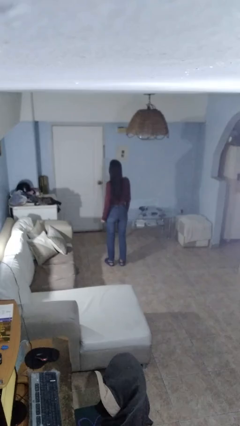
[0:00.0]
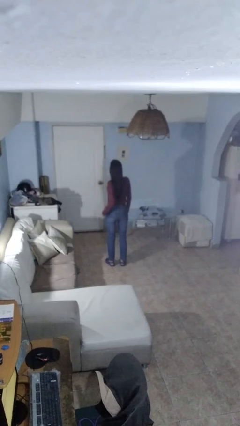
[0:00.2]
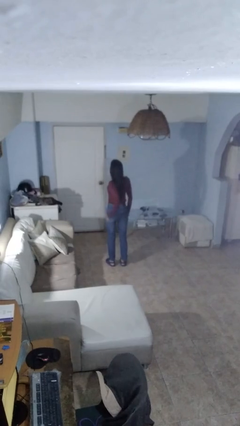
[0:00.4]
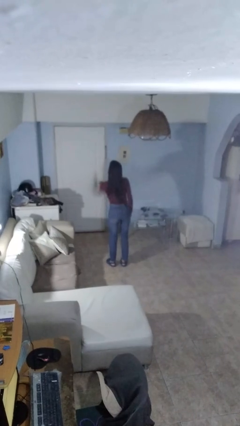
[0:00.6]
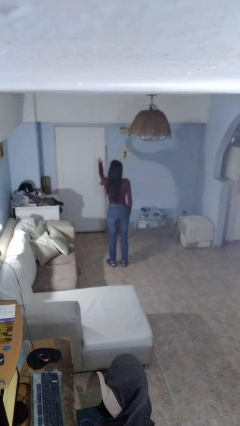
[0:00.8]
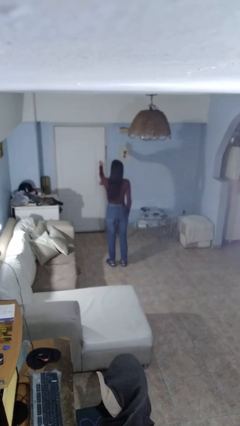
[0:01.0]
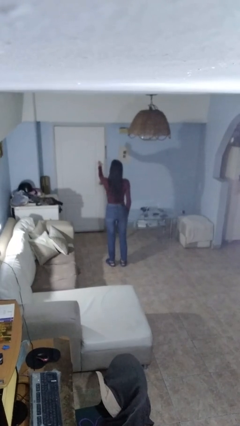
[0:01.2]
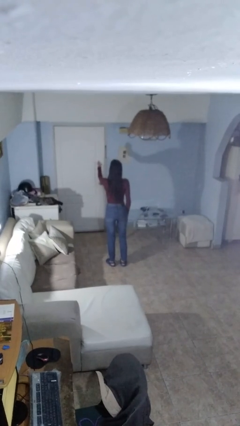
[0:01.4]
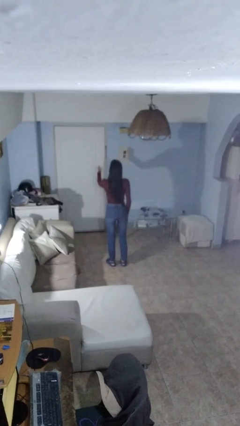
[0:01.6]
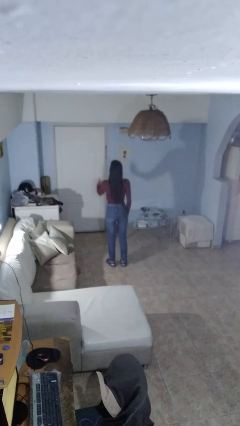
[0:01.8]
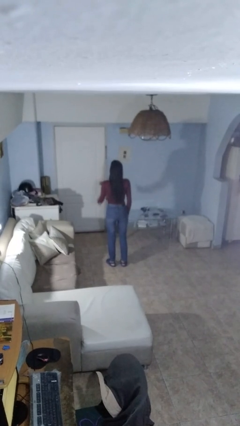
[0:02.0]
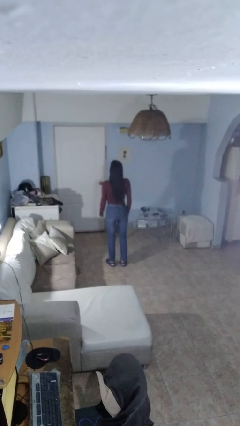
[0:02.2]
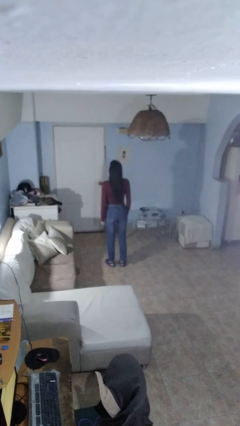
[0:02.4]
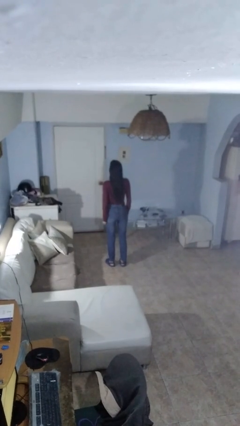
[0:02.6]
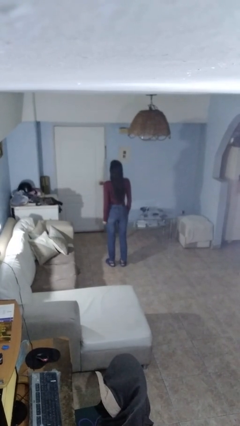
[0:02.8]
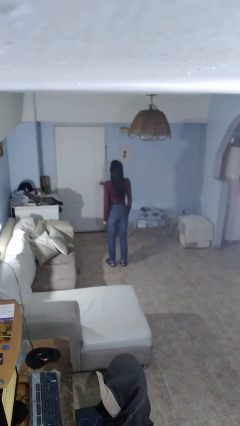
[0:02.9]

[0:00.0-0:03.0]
person punches

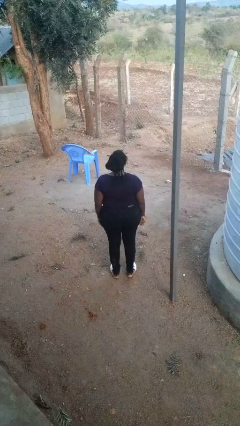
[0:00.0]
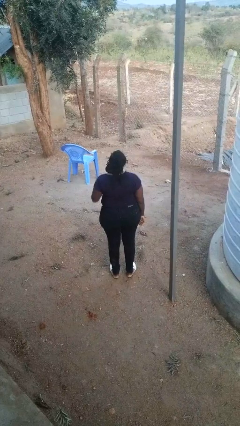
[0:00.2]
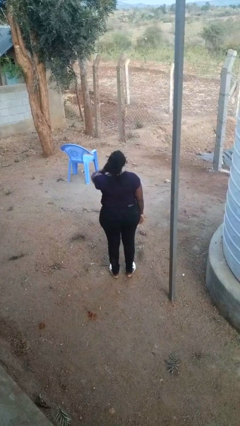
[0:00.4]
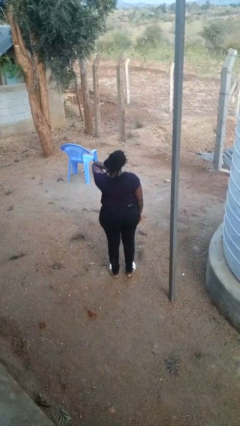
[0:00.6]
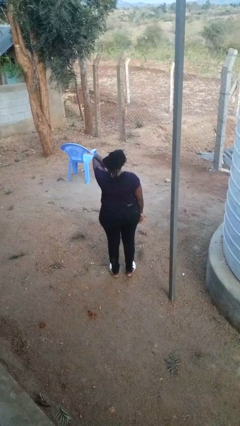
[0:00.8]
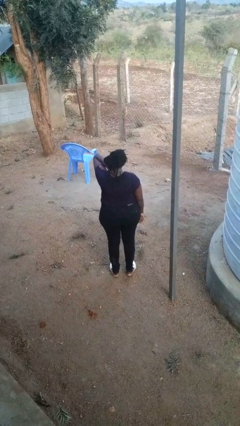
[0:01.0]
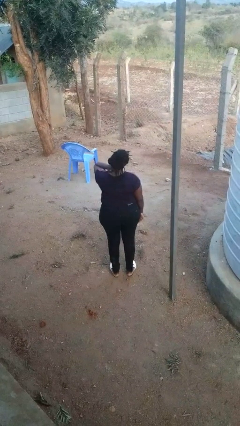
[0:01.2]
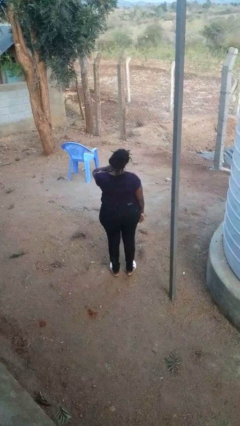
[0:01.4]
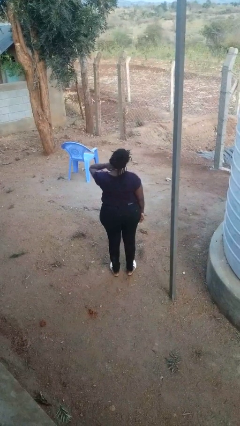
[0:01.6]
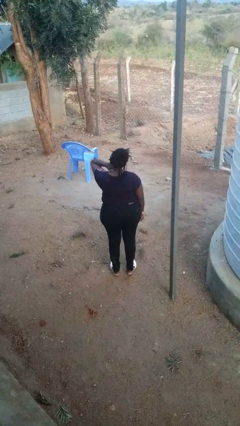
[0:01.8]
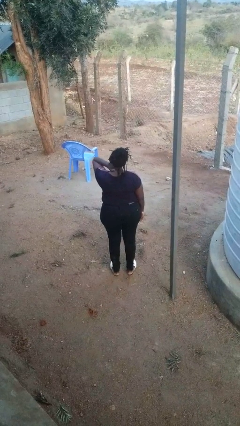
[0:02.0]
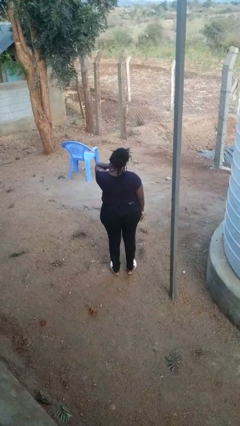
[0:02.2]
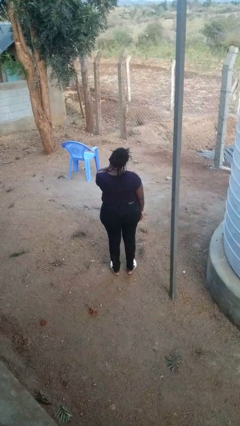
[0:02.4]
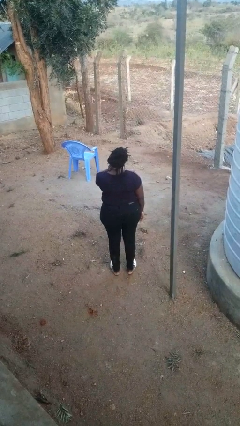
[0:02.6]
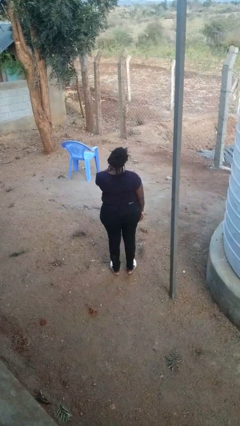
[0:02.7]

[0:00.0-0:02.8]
person rubs neck

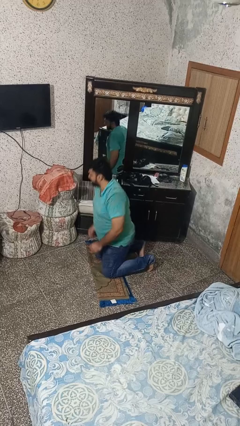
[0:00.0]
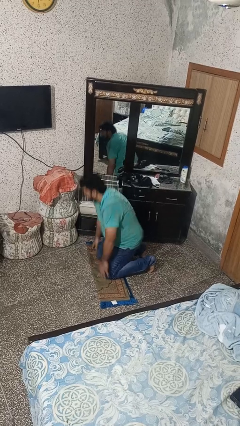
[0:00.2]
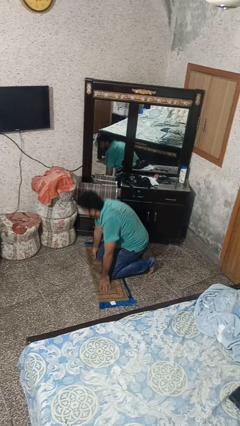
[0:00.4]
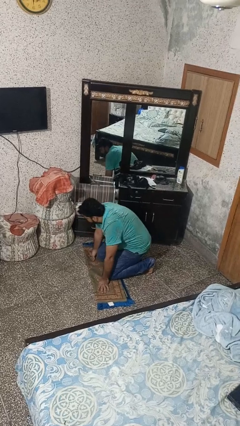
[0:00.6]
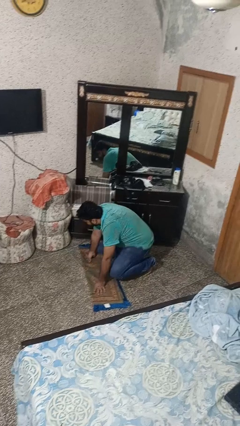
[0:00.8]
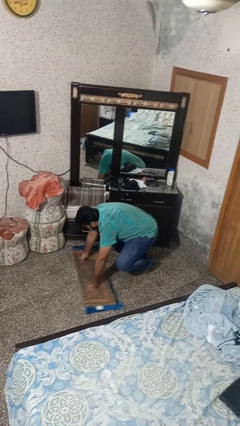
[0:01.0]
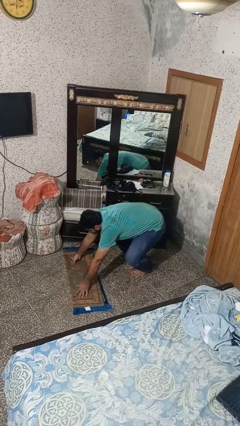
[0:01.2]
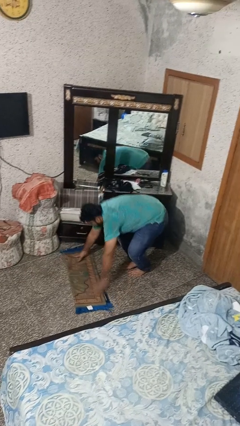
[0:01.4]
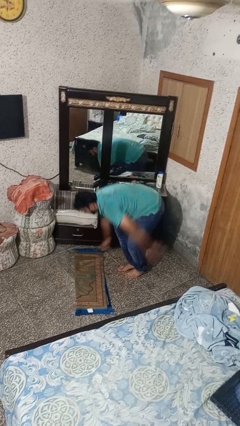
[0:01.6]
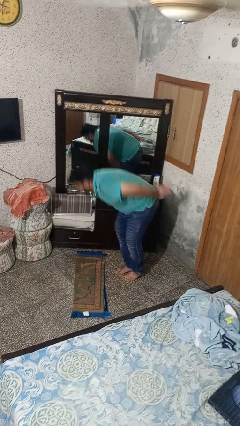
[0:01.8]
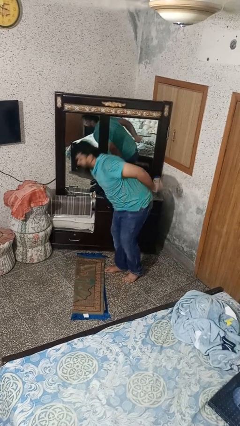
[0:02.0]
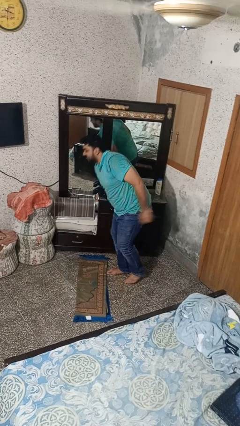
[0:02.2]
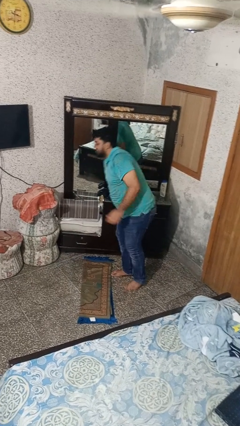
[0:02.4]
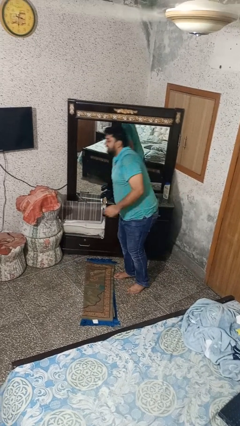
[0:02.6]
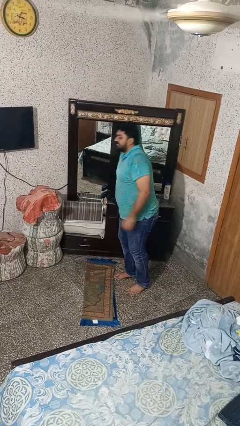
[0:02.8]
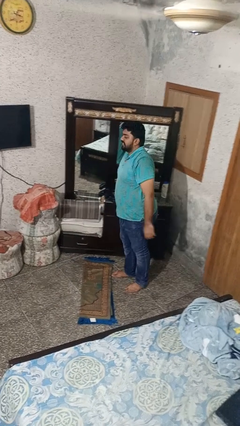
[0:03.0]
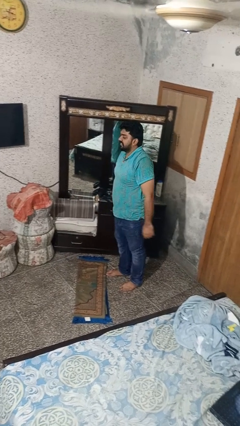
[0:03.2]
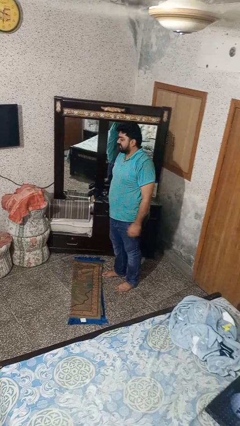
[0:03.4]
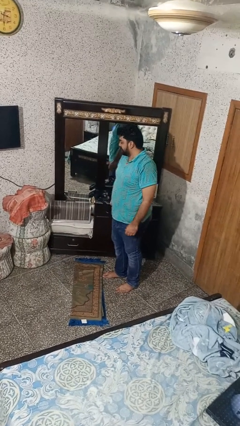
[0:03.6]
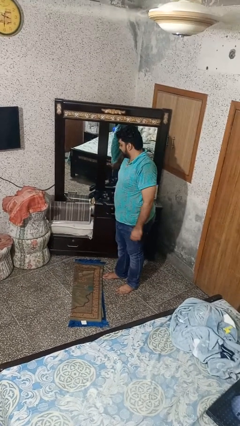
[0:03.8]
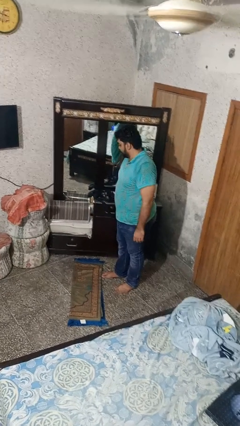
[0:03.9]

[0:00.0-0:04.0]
person stands up from floor

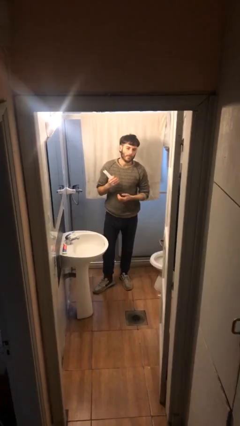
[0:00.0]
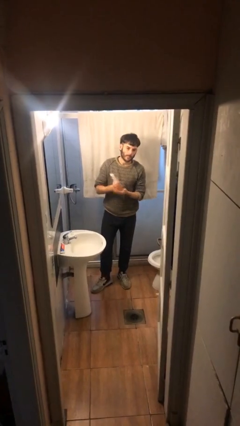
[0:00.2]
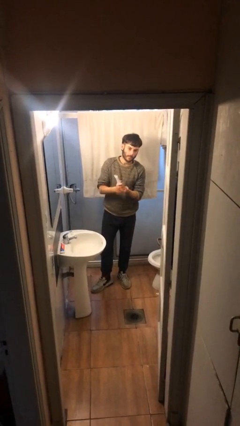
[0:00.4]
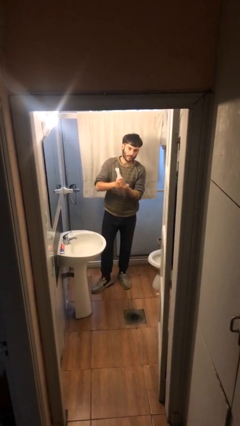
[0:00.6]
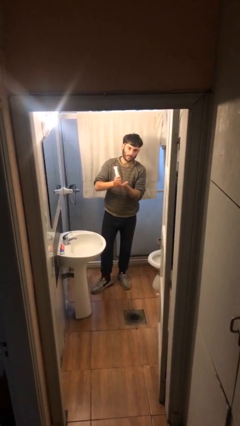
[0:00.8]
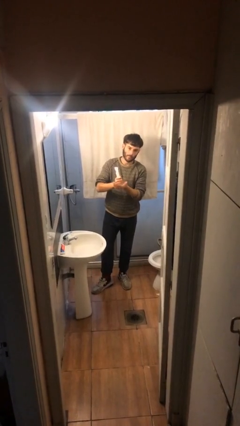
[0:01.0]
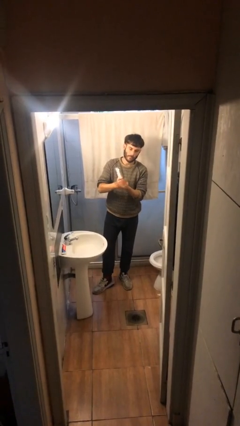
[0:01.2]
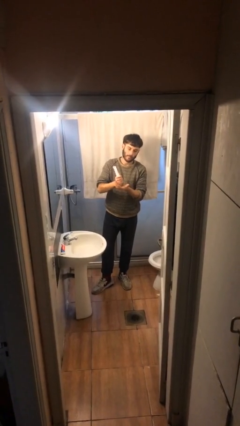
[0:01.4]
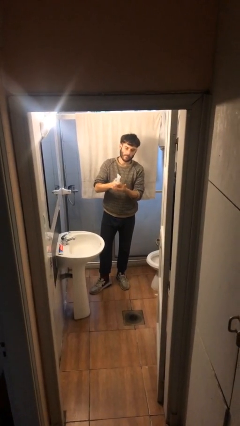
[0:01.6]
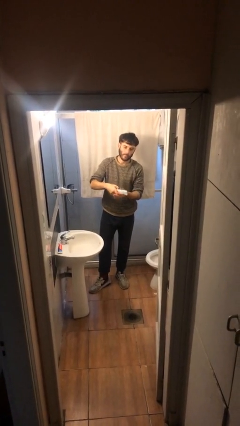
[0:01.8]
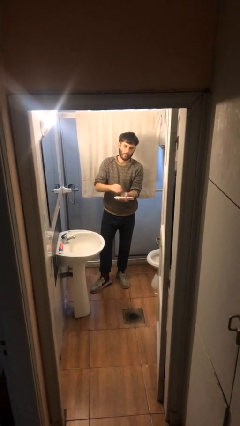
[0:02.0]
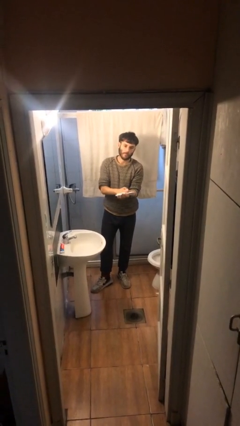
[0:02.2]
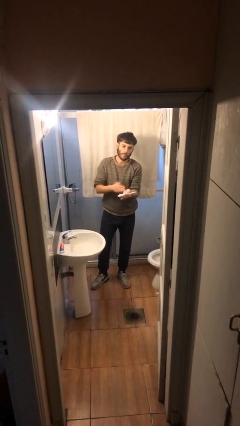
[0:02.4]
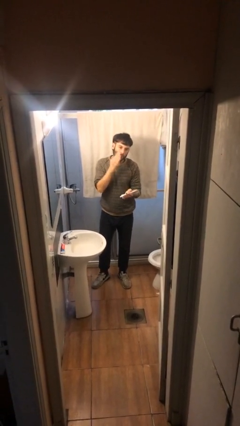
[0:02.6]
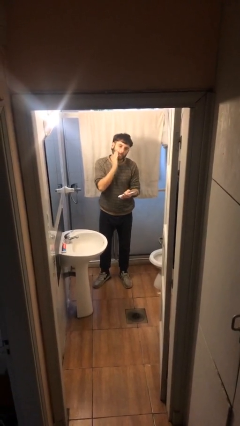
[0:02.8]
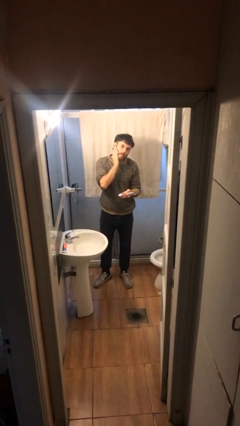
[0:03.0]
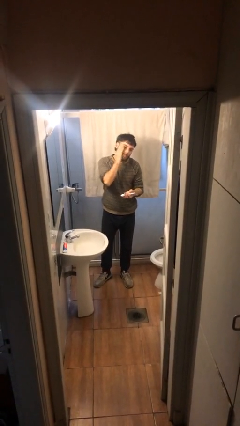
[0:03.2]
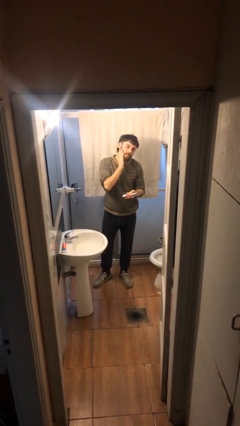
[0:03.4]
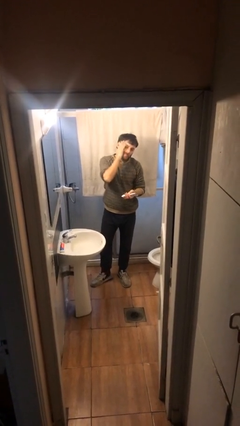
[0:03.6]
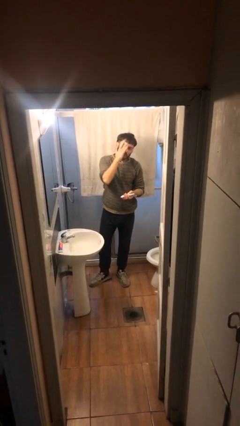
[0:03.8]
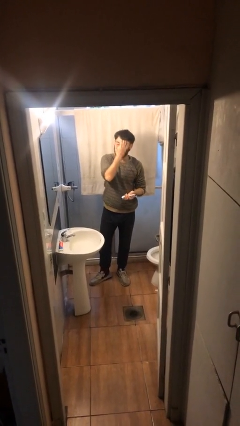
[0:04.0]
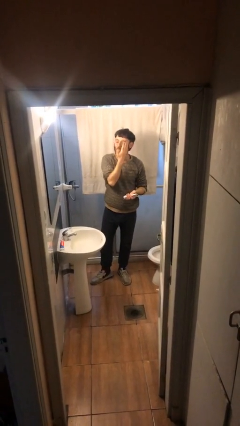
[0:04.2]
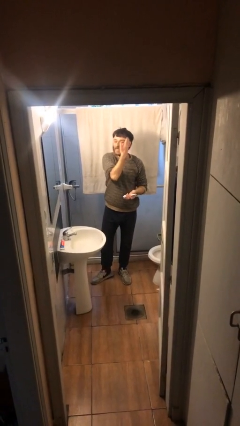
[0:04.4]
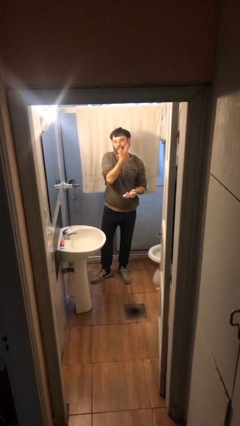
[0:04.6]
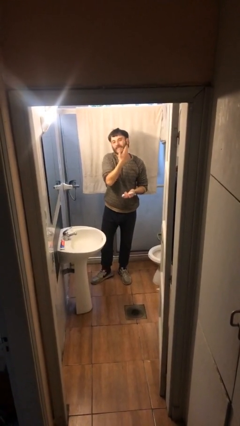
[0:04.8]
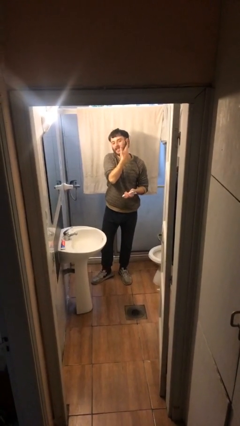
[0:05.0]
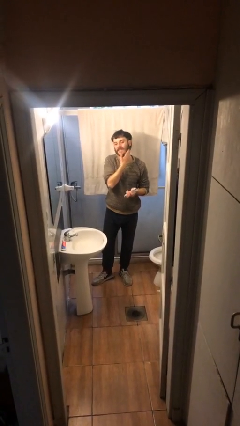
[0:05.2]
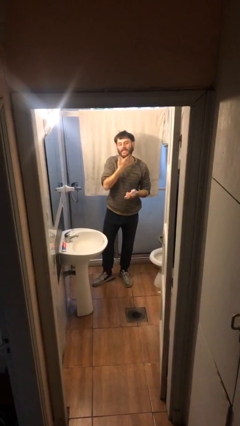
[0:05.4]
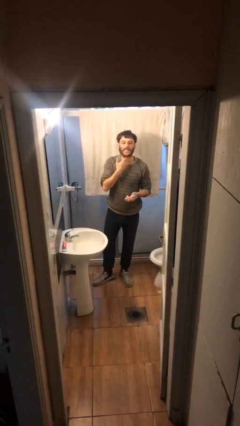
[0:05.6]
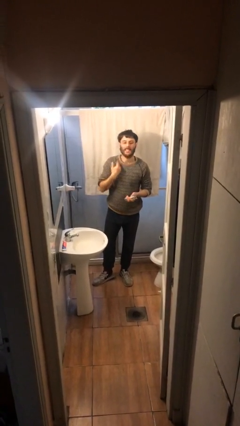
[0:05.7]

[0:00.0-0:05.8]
person applies sunscreen

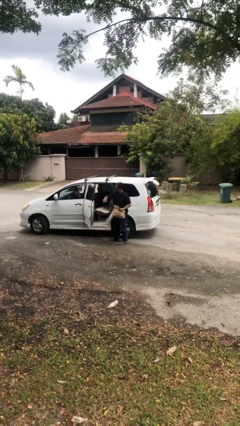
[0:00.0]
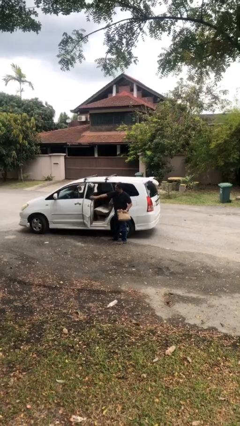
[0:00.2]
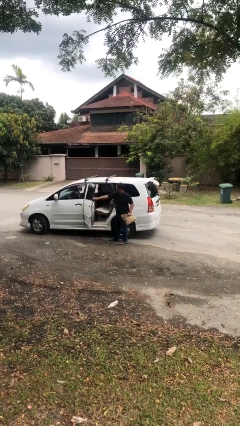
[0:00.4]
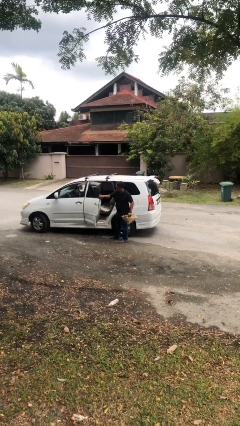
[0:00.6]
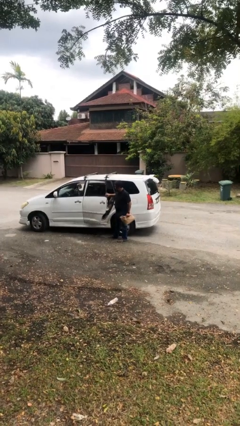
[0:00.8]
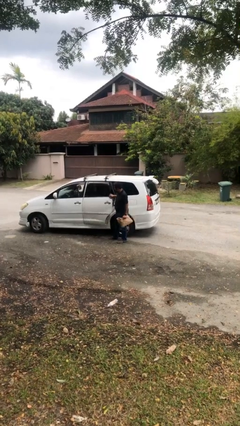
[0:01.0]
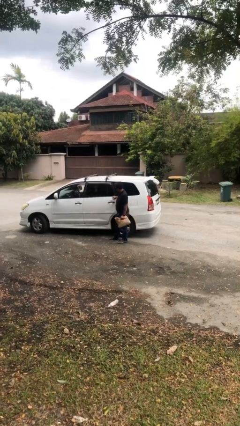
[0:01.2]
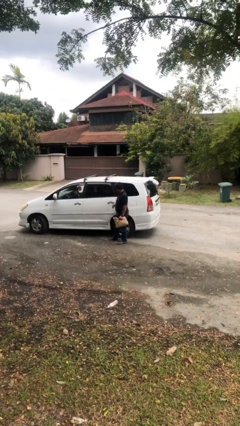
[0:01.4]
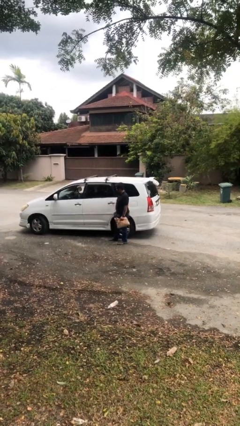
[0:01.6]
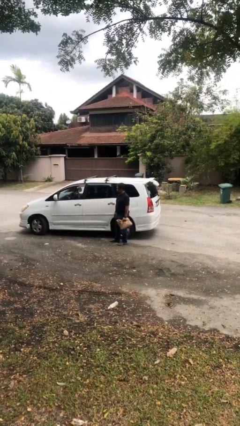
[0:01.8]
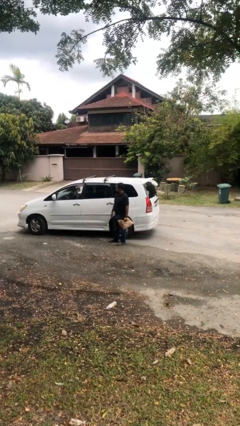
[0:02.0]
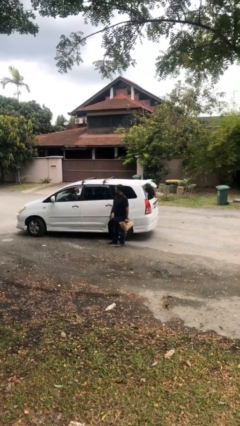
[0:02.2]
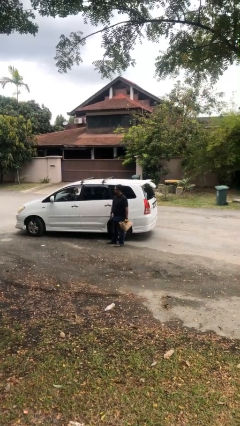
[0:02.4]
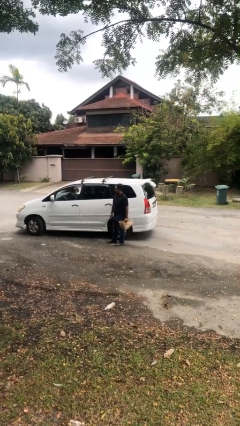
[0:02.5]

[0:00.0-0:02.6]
person closes car door
